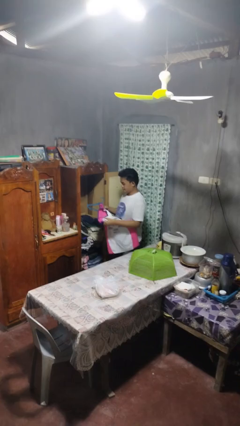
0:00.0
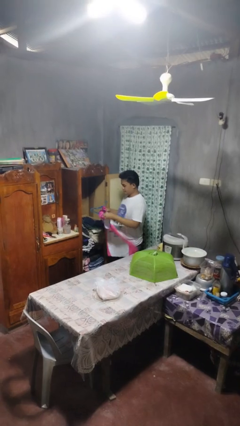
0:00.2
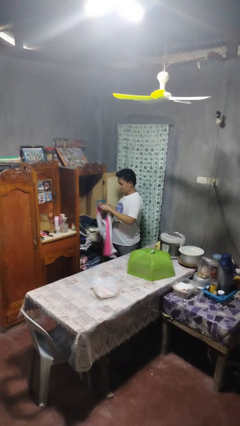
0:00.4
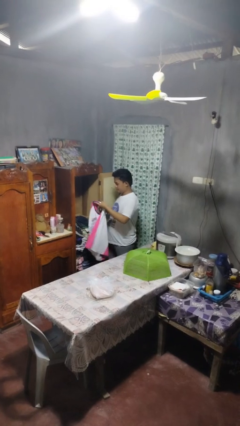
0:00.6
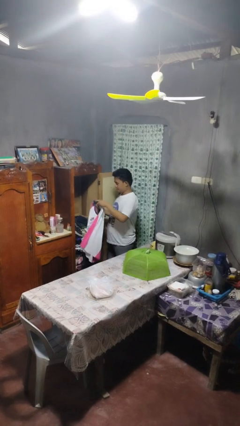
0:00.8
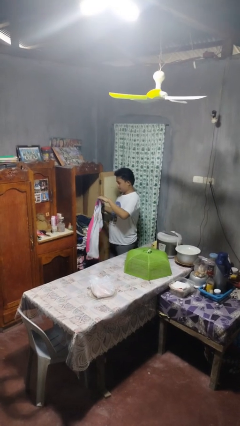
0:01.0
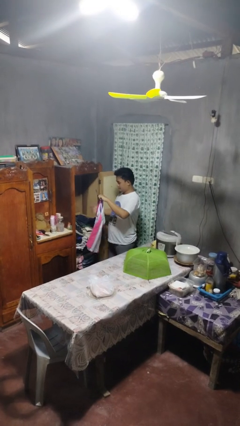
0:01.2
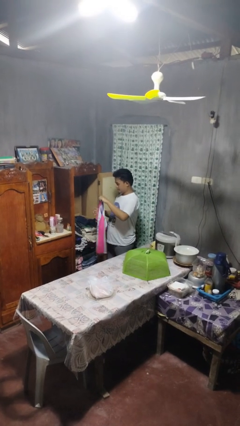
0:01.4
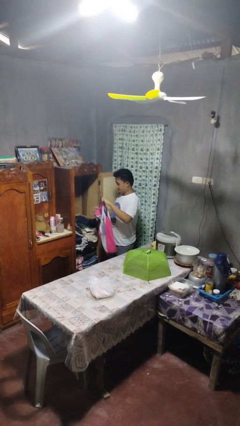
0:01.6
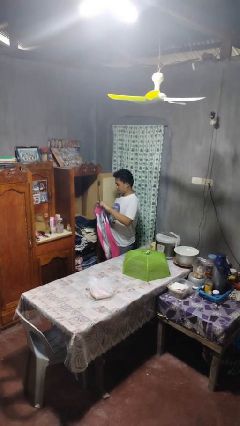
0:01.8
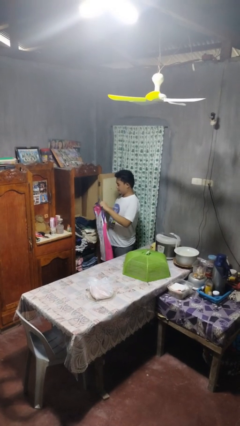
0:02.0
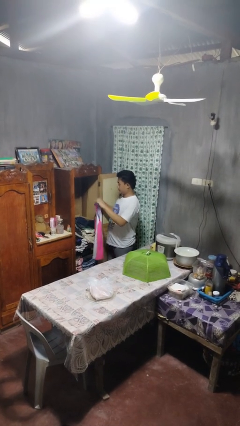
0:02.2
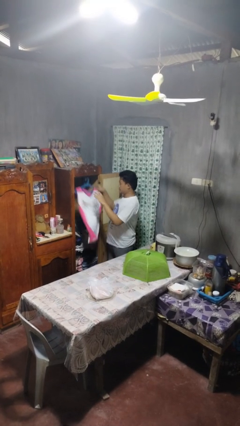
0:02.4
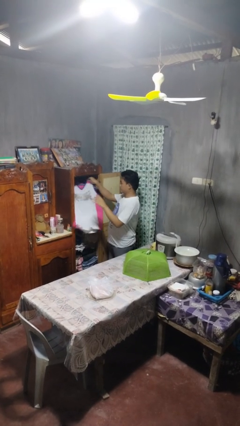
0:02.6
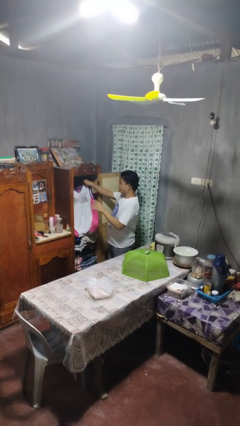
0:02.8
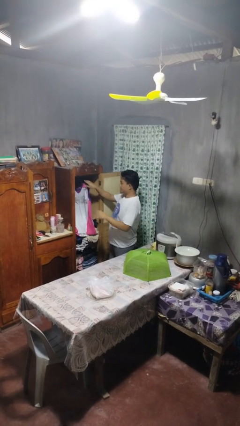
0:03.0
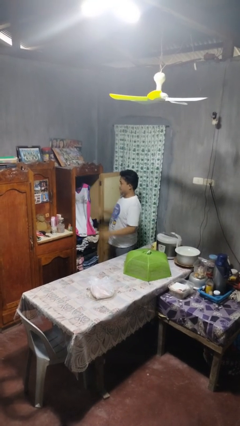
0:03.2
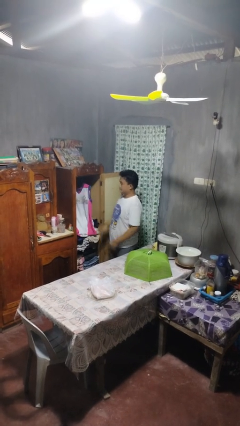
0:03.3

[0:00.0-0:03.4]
person puts clothes into closet

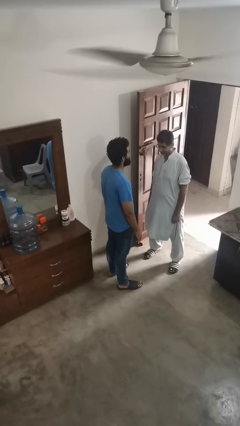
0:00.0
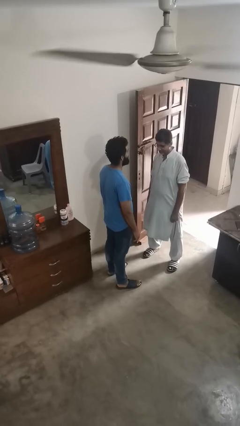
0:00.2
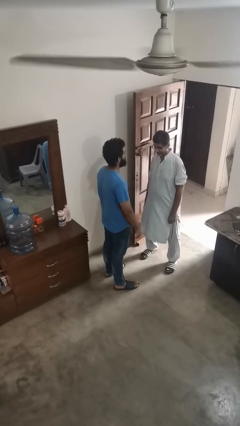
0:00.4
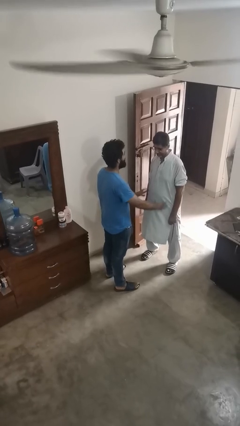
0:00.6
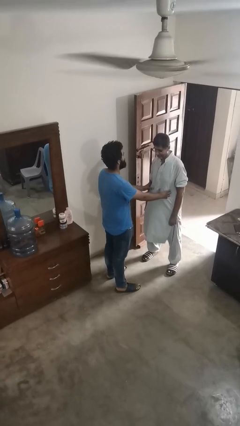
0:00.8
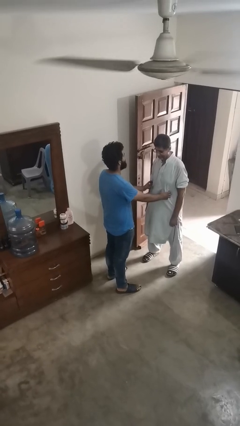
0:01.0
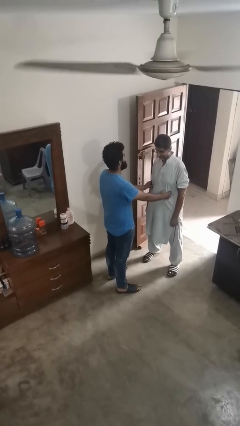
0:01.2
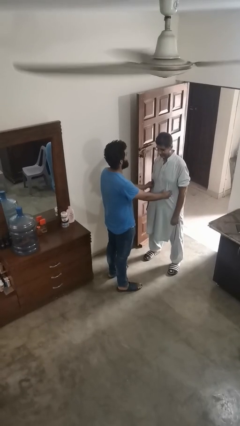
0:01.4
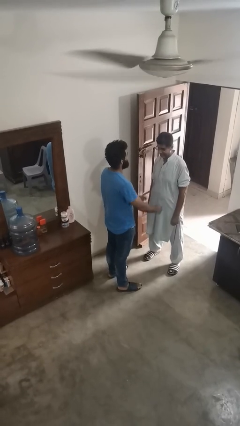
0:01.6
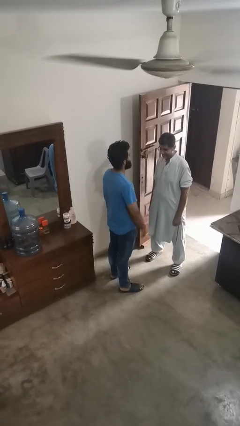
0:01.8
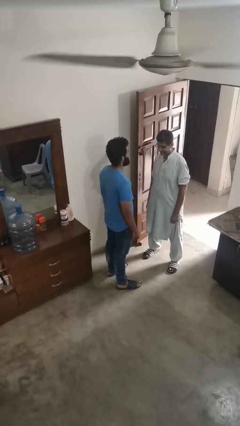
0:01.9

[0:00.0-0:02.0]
person tickles person

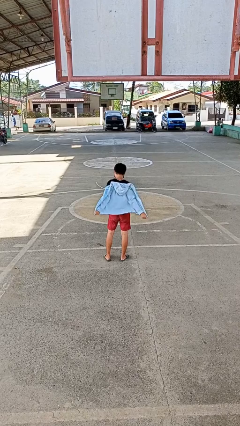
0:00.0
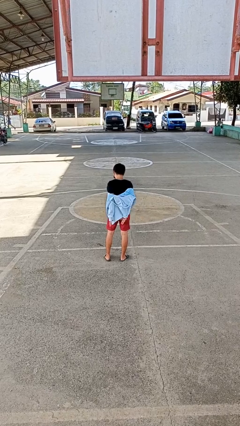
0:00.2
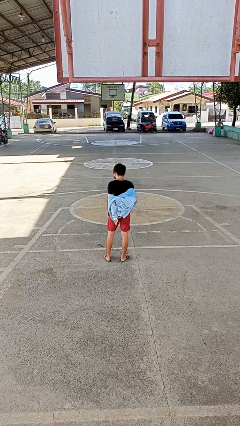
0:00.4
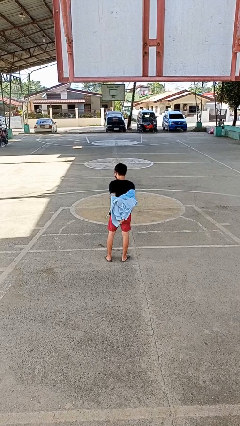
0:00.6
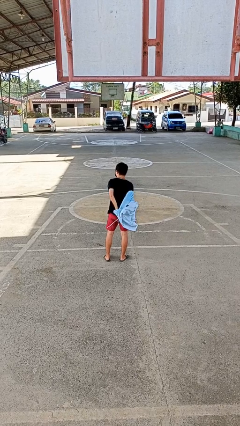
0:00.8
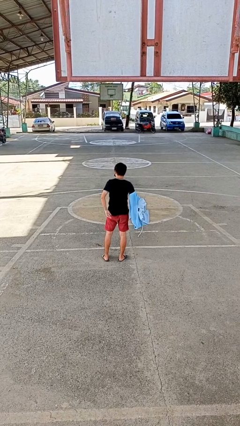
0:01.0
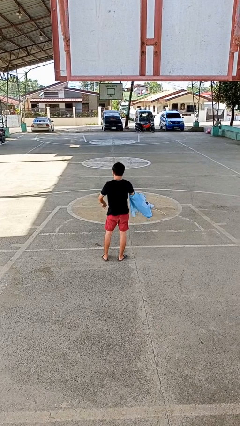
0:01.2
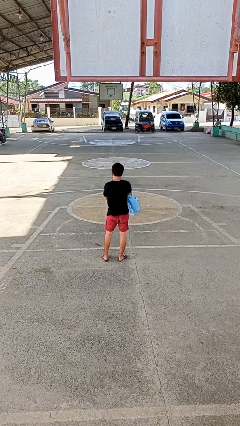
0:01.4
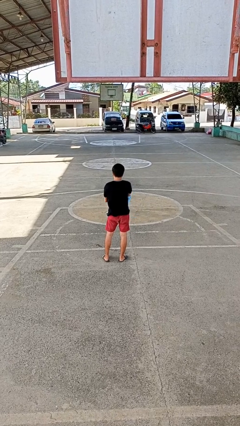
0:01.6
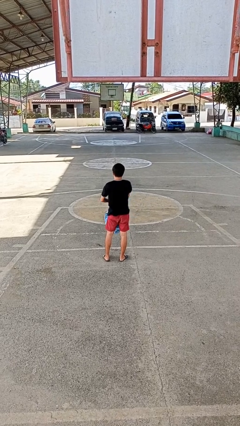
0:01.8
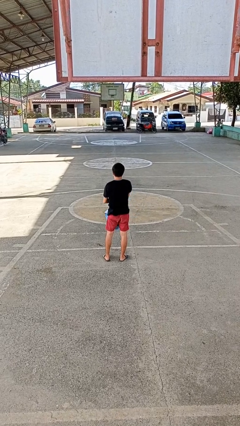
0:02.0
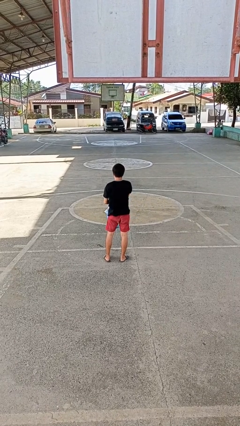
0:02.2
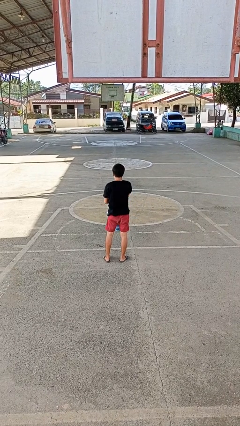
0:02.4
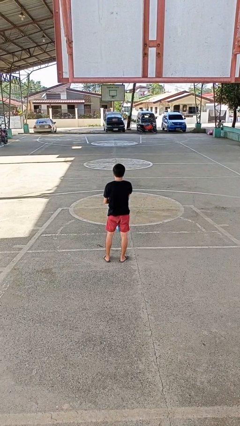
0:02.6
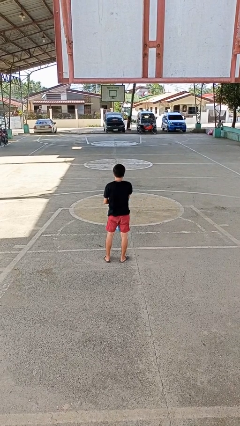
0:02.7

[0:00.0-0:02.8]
person takes off jacket

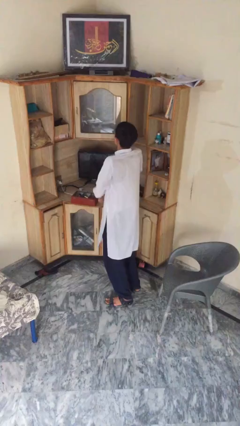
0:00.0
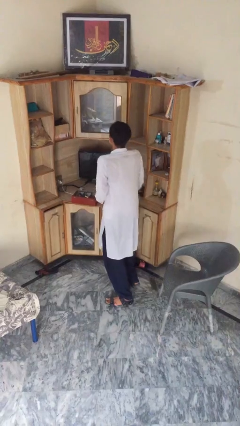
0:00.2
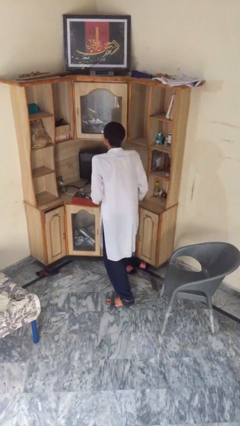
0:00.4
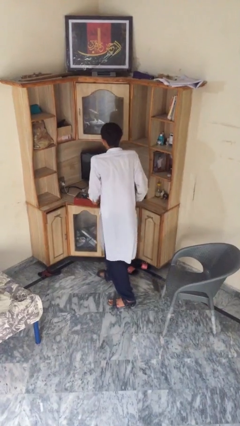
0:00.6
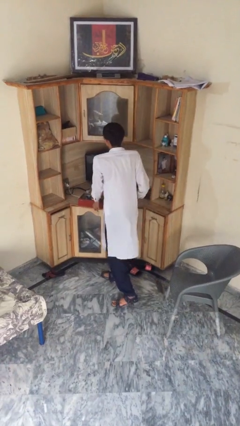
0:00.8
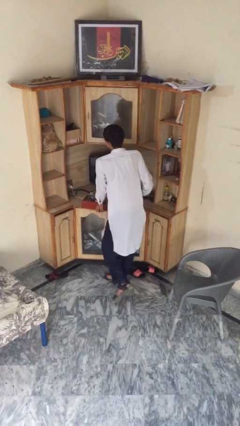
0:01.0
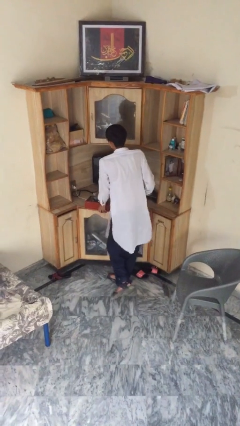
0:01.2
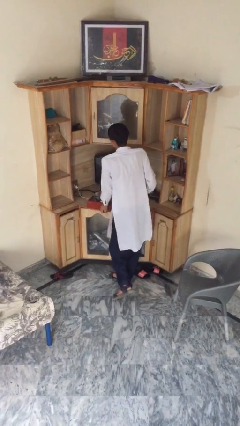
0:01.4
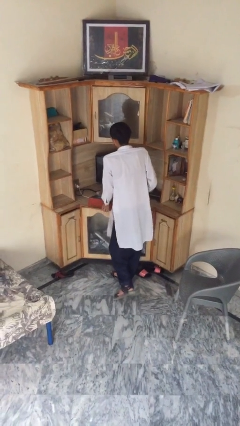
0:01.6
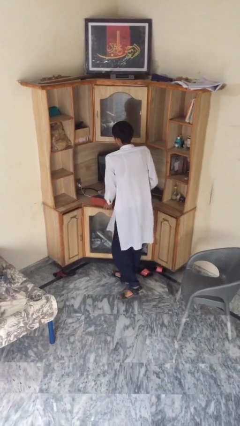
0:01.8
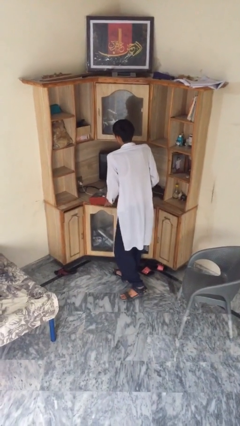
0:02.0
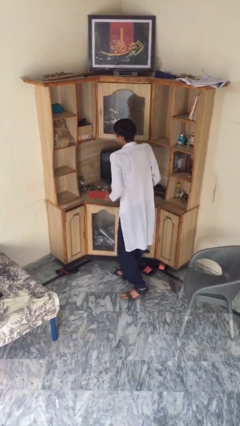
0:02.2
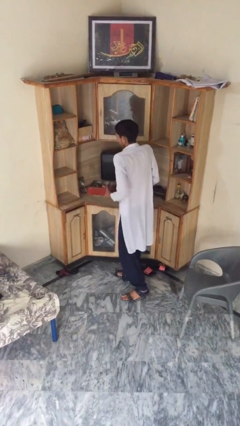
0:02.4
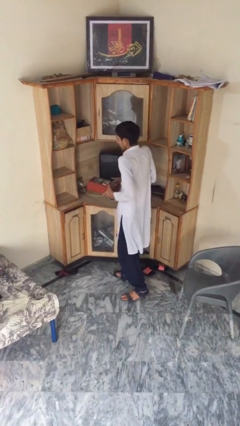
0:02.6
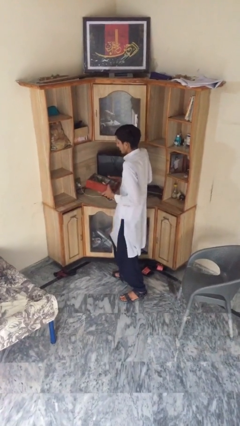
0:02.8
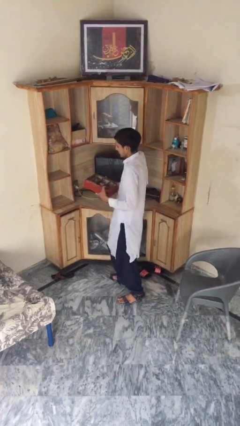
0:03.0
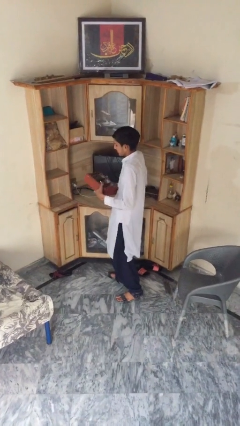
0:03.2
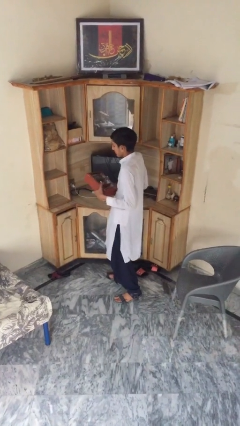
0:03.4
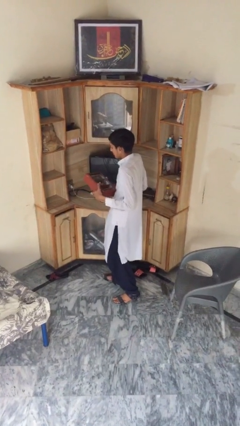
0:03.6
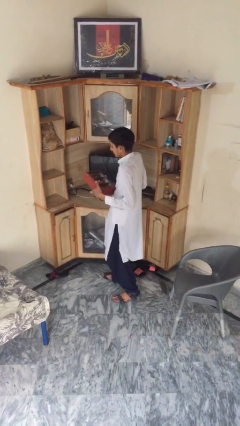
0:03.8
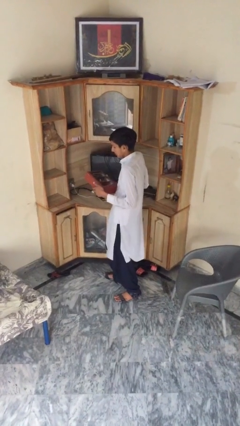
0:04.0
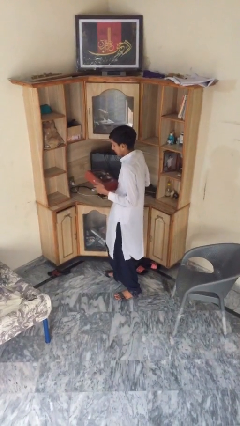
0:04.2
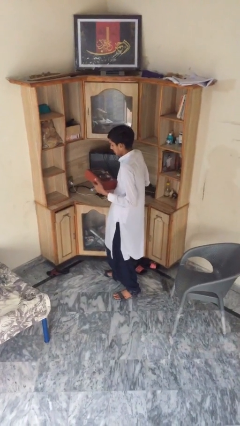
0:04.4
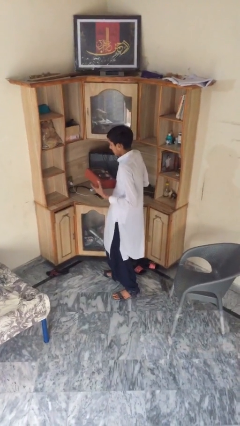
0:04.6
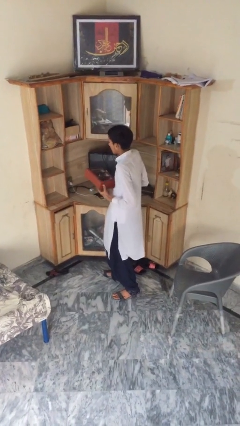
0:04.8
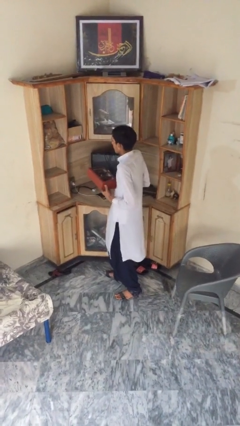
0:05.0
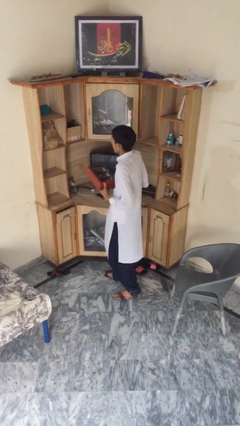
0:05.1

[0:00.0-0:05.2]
person picks up object from table

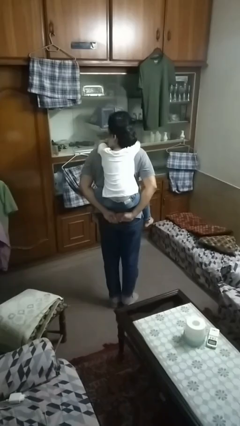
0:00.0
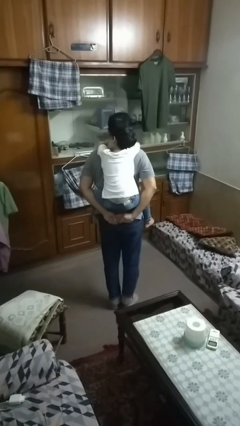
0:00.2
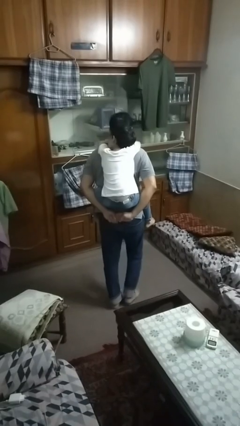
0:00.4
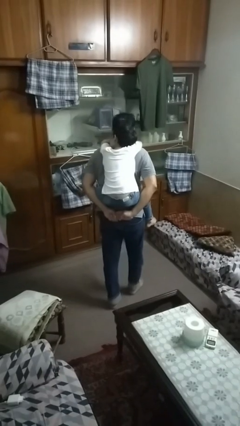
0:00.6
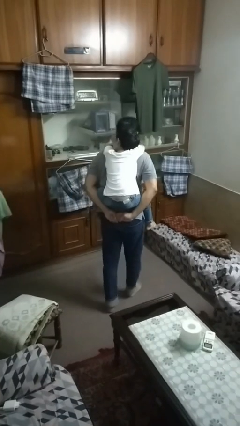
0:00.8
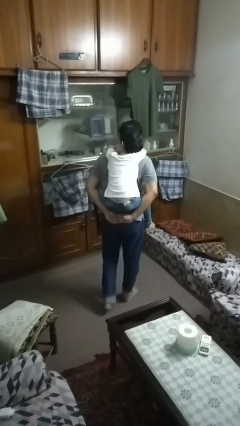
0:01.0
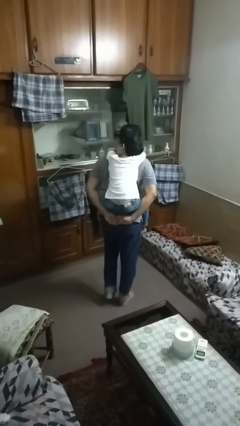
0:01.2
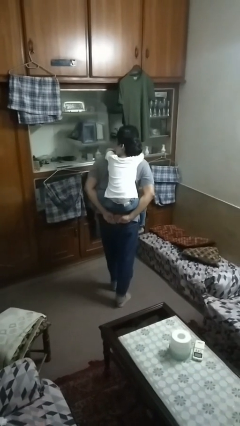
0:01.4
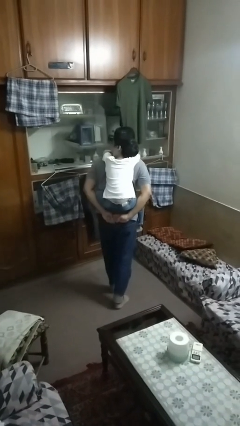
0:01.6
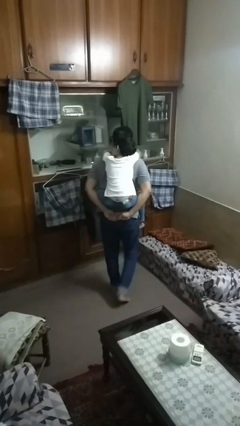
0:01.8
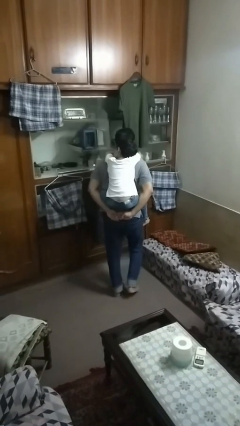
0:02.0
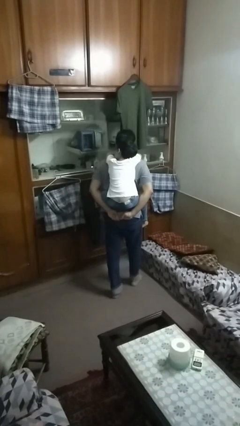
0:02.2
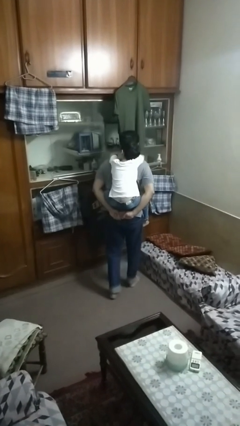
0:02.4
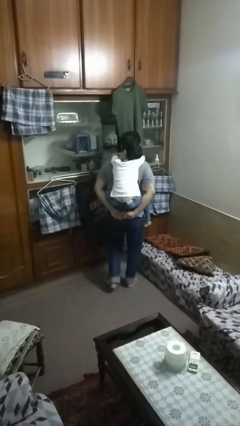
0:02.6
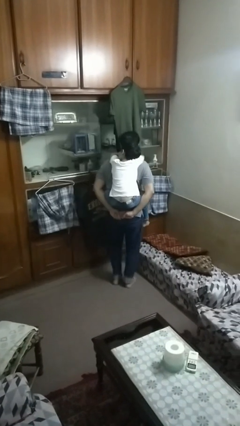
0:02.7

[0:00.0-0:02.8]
person carries person on back

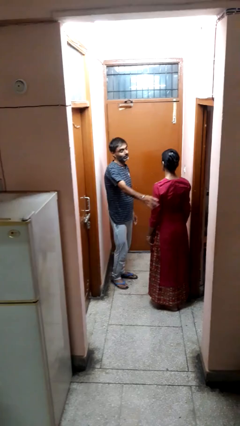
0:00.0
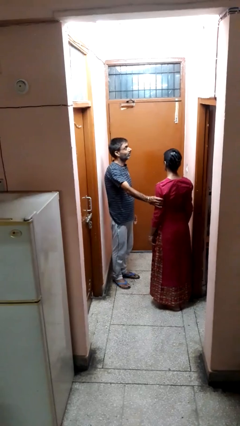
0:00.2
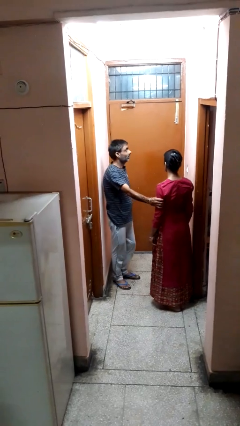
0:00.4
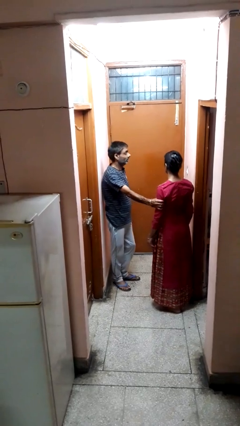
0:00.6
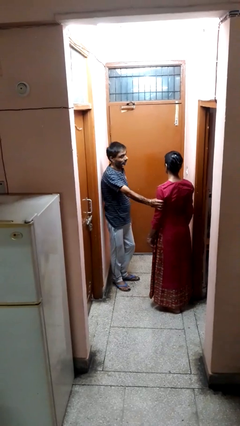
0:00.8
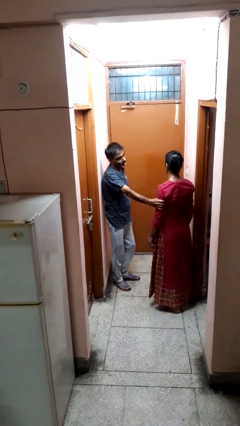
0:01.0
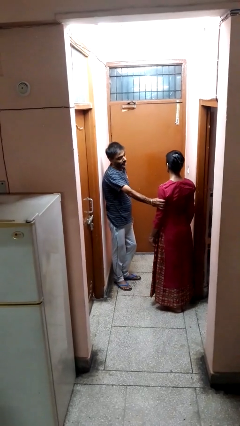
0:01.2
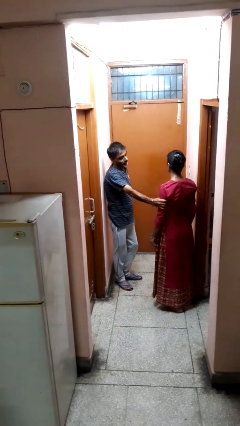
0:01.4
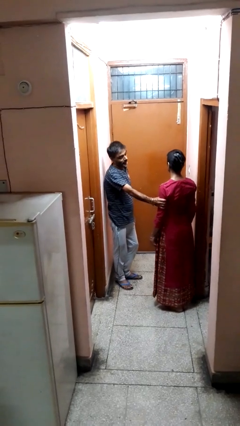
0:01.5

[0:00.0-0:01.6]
person grabs person by bicep
